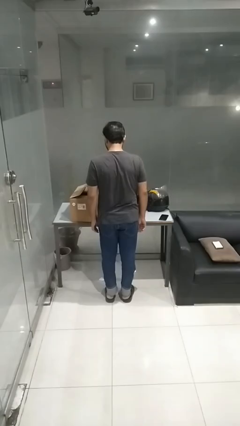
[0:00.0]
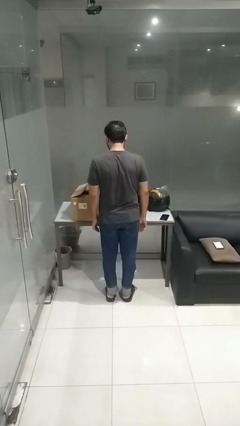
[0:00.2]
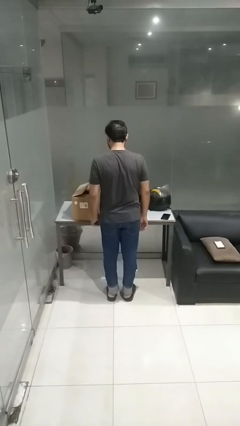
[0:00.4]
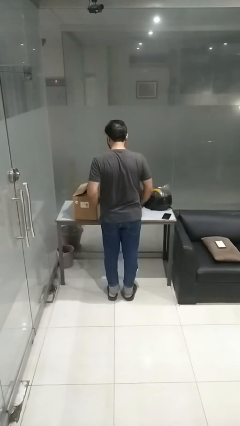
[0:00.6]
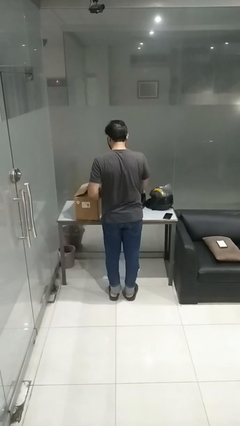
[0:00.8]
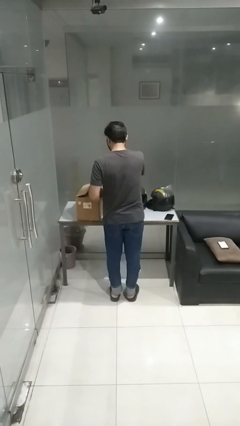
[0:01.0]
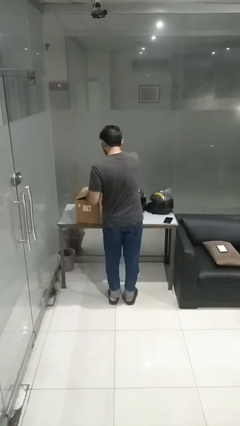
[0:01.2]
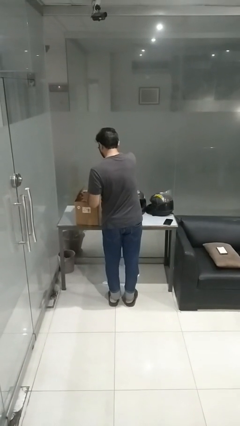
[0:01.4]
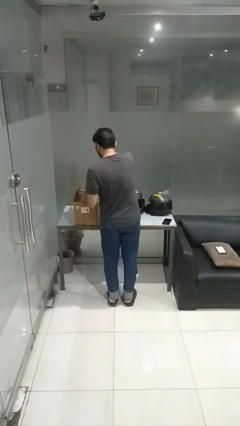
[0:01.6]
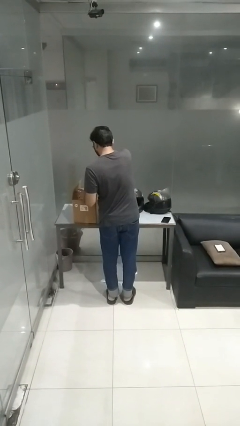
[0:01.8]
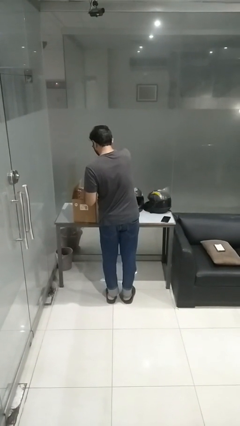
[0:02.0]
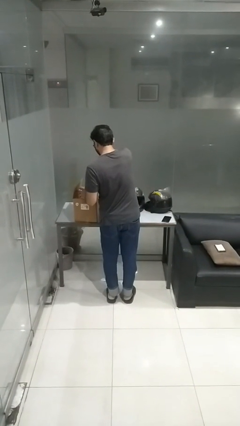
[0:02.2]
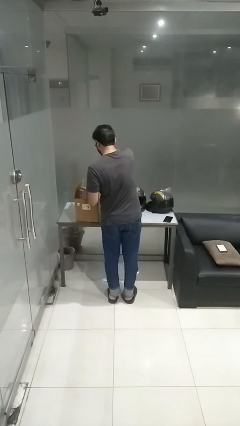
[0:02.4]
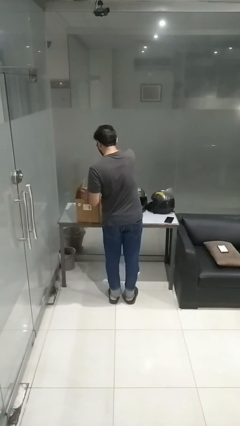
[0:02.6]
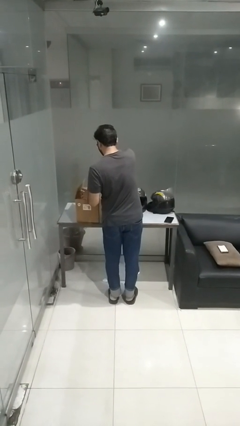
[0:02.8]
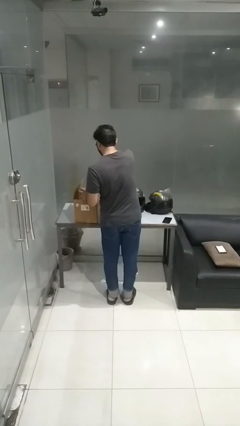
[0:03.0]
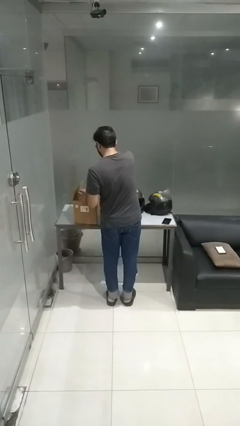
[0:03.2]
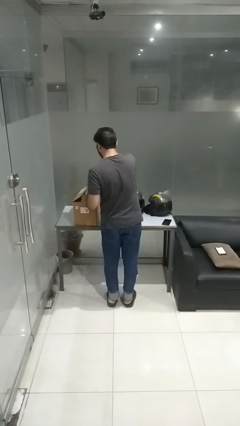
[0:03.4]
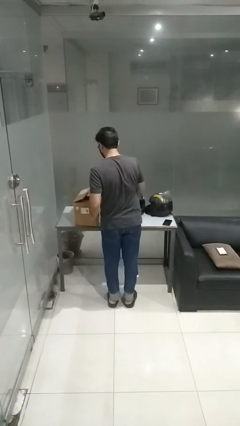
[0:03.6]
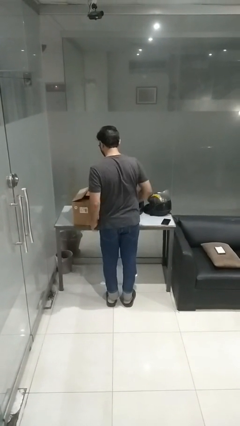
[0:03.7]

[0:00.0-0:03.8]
person searches in box

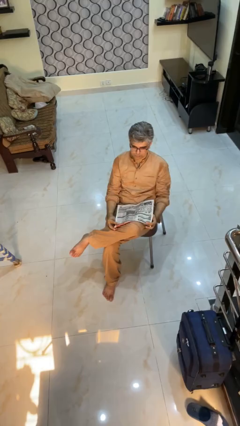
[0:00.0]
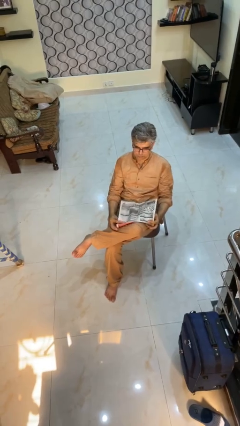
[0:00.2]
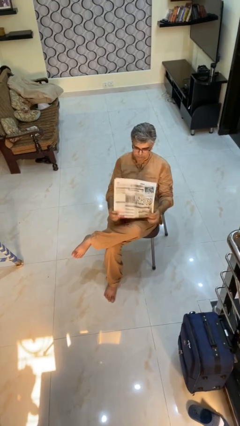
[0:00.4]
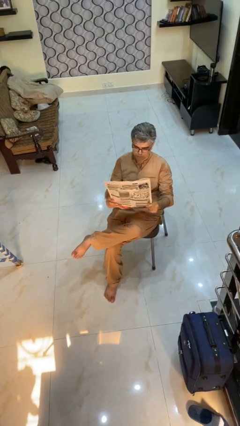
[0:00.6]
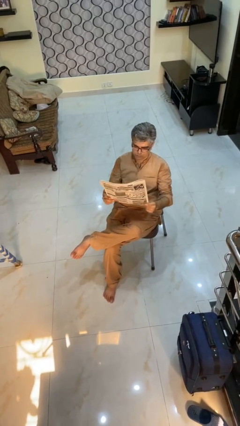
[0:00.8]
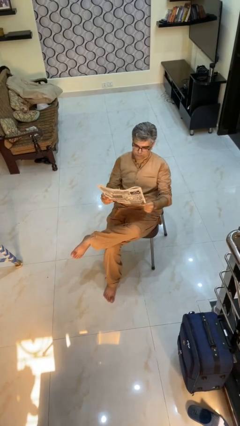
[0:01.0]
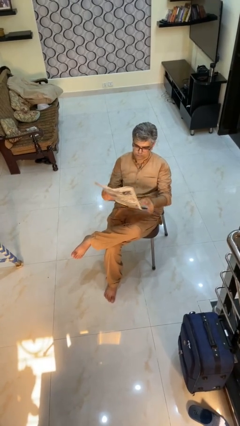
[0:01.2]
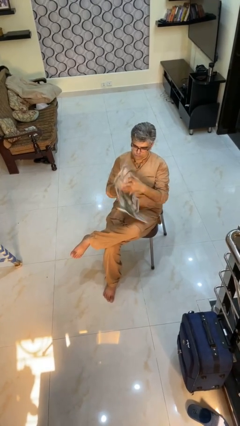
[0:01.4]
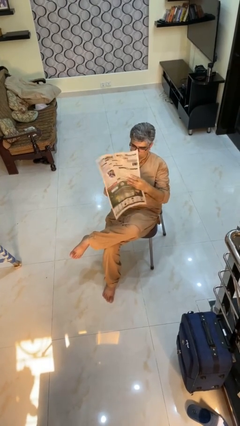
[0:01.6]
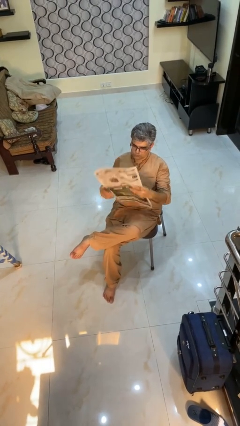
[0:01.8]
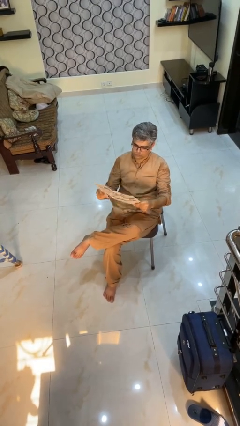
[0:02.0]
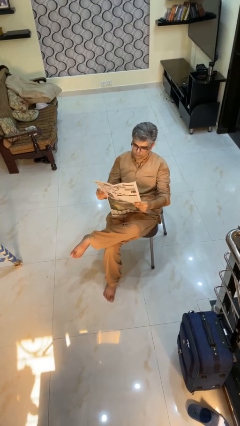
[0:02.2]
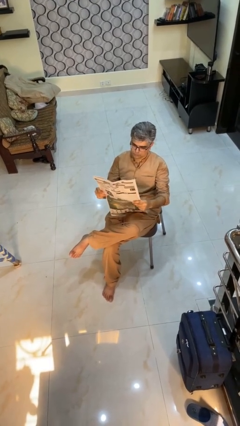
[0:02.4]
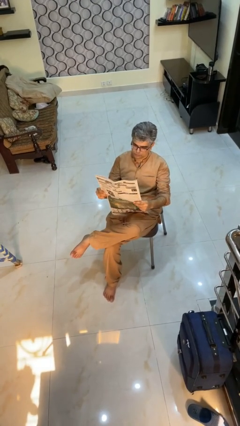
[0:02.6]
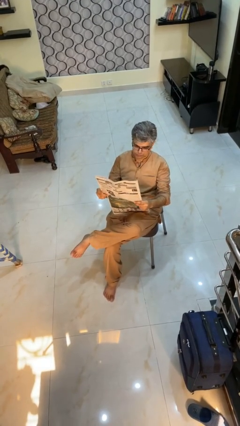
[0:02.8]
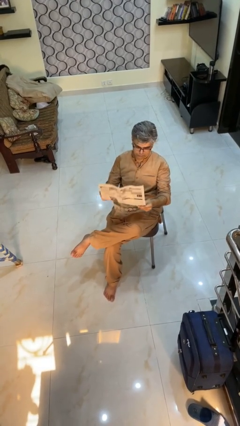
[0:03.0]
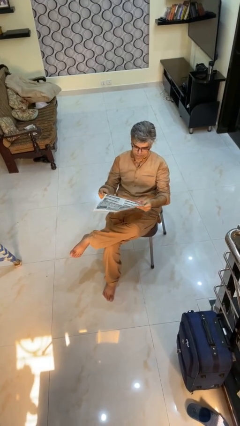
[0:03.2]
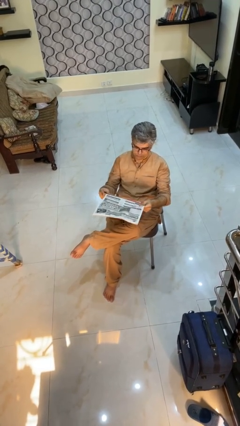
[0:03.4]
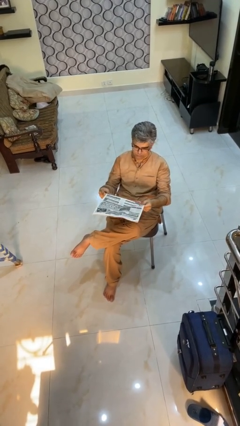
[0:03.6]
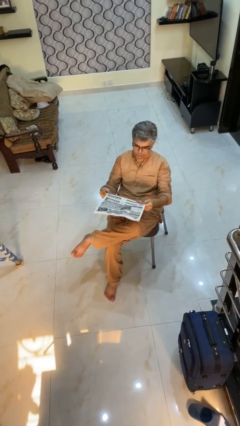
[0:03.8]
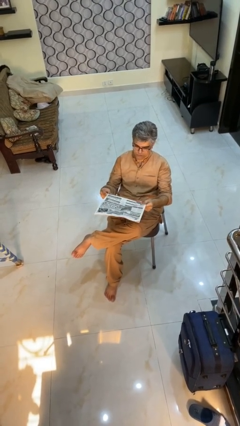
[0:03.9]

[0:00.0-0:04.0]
person reads newspaper

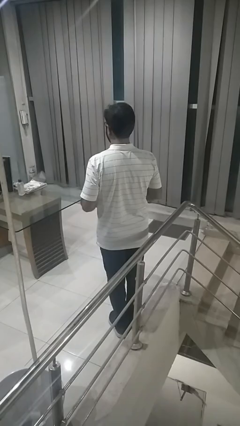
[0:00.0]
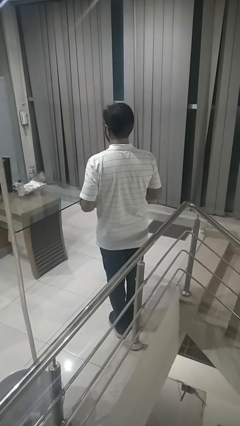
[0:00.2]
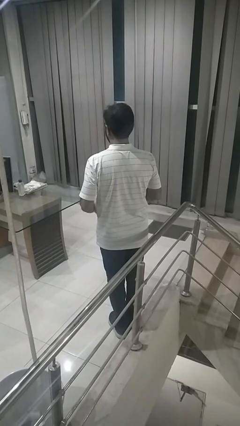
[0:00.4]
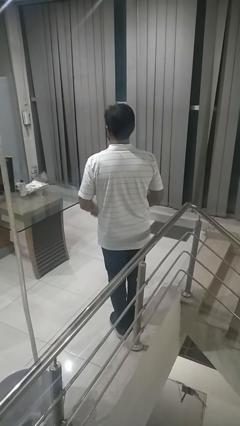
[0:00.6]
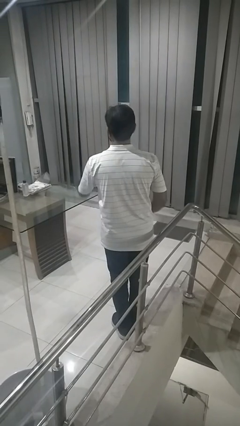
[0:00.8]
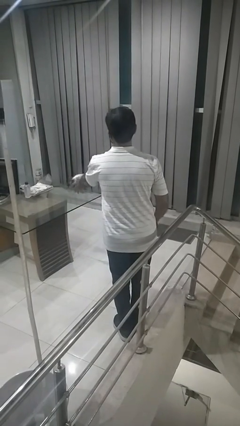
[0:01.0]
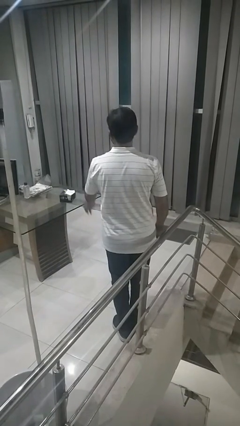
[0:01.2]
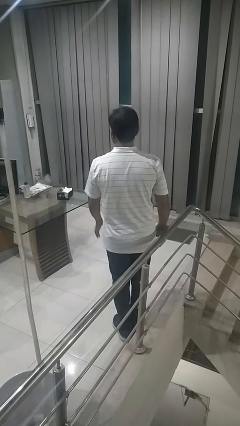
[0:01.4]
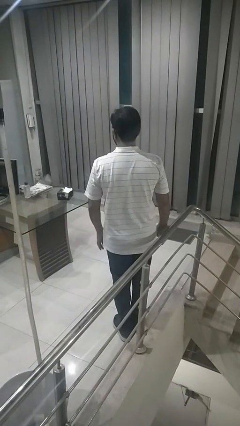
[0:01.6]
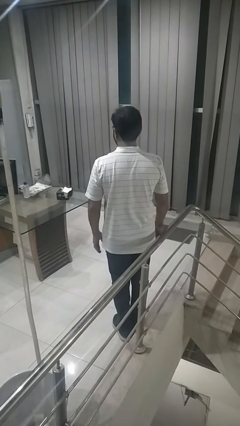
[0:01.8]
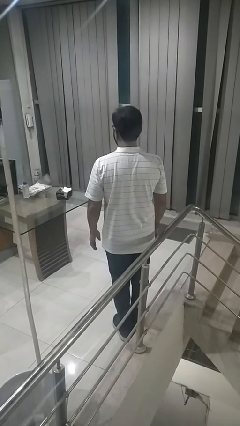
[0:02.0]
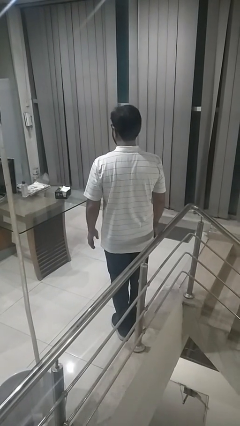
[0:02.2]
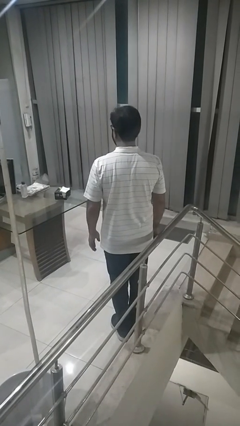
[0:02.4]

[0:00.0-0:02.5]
person throws object on table

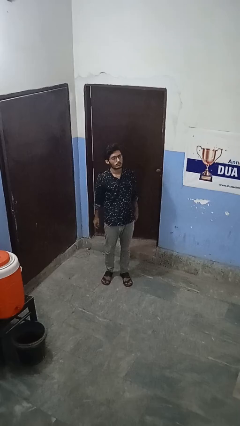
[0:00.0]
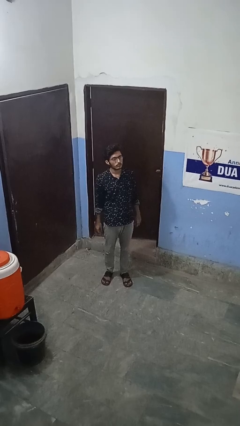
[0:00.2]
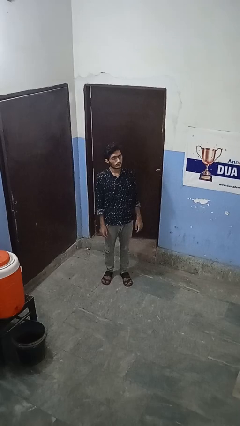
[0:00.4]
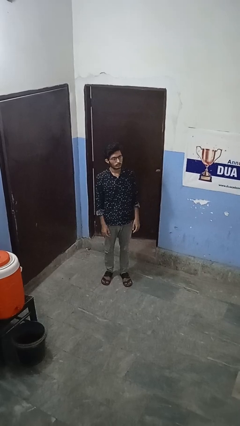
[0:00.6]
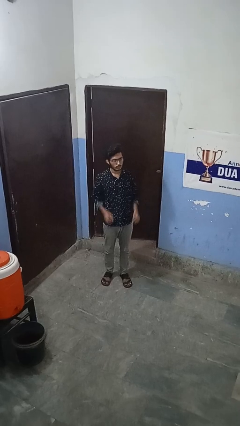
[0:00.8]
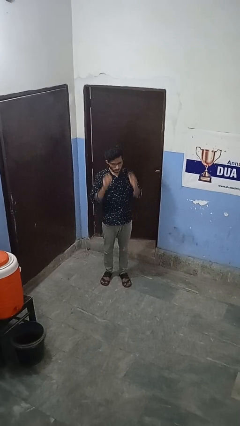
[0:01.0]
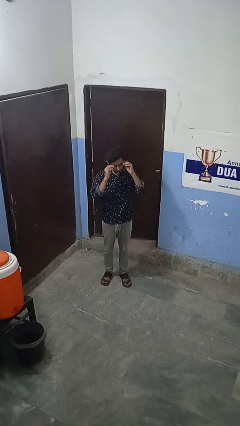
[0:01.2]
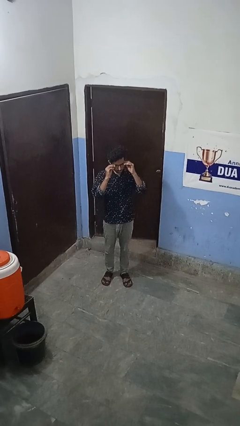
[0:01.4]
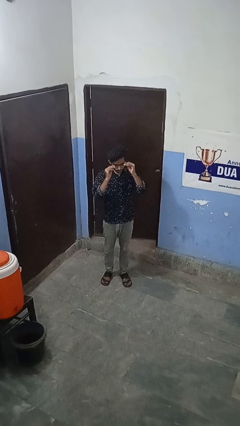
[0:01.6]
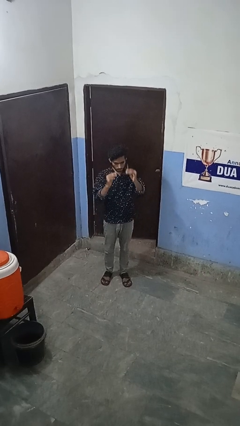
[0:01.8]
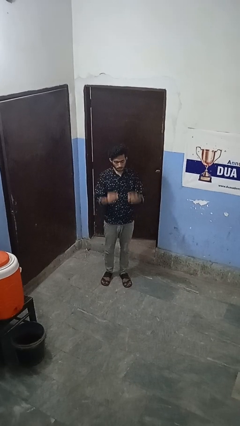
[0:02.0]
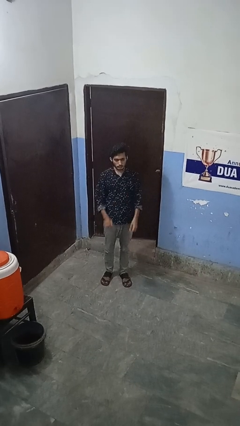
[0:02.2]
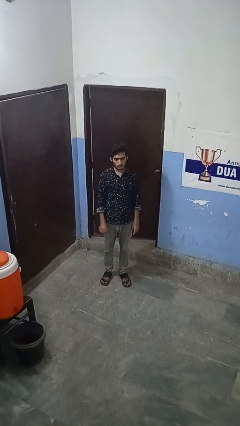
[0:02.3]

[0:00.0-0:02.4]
person takes off glasses

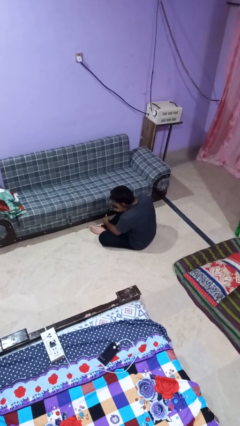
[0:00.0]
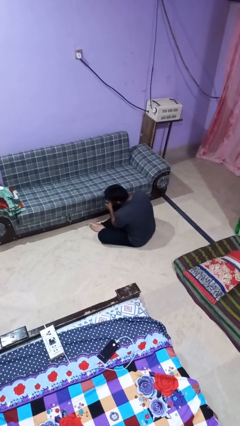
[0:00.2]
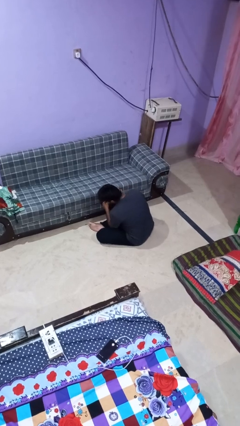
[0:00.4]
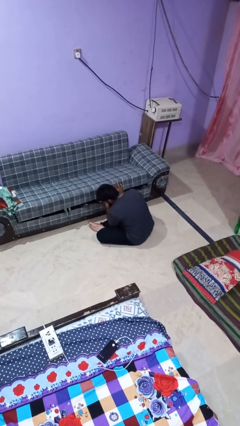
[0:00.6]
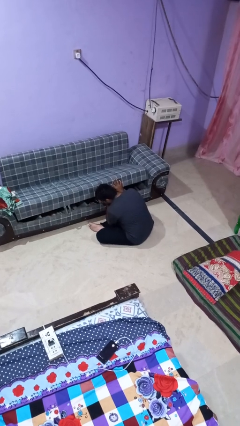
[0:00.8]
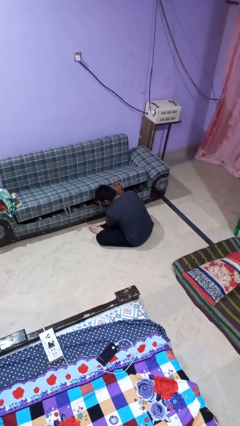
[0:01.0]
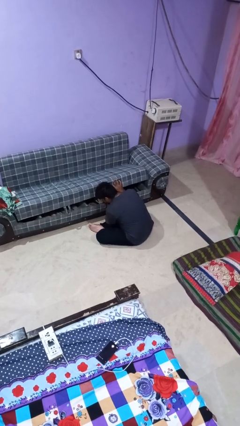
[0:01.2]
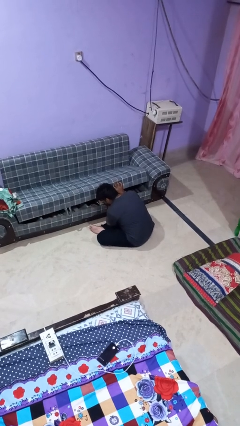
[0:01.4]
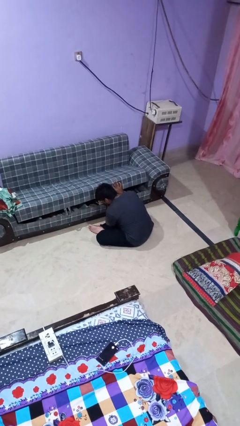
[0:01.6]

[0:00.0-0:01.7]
person searches under couch

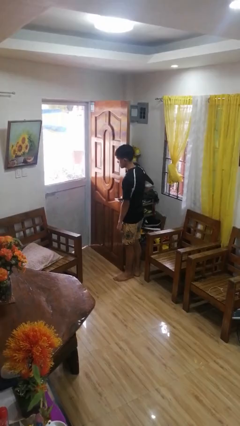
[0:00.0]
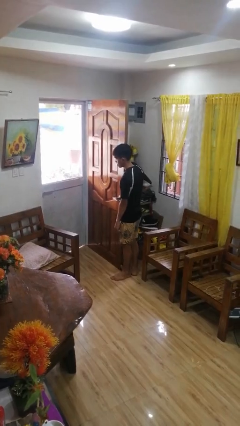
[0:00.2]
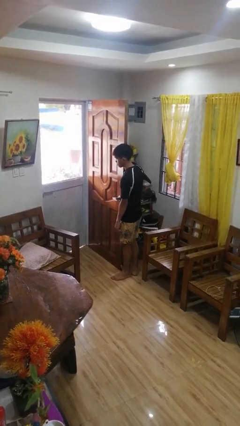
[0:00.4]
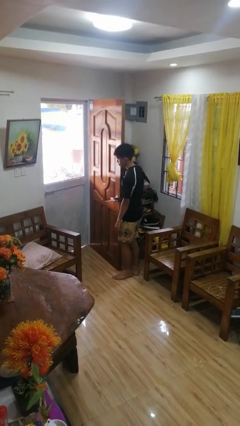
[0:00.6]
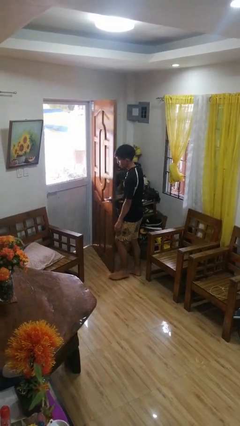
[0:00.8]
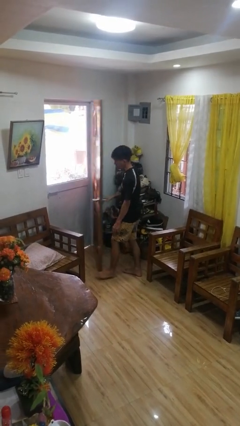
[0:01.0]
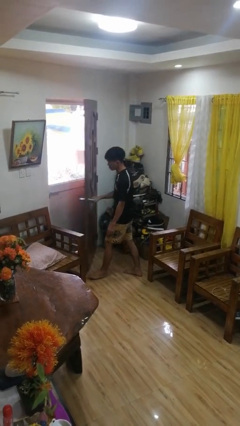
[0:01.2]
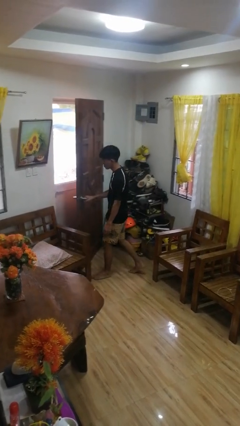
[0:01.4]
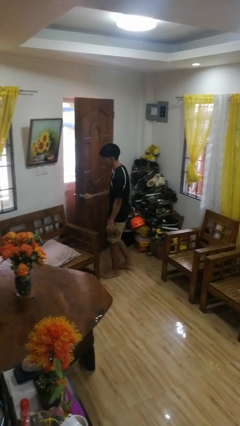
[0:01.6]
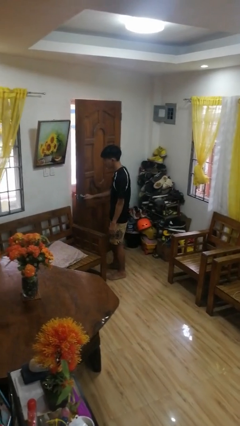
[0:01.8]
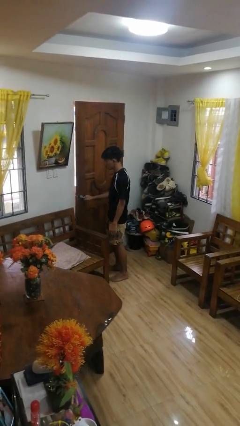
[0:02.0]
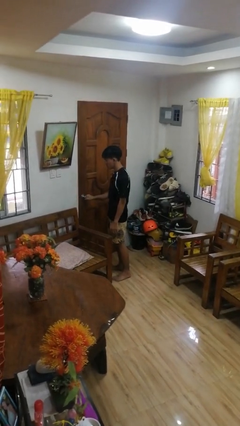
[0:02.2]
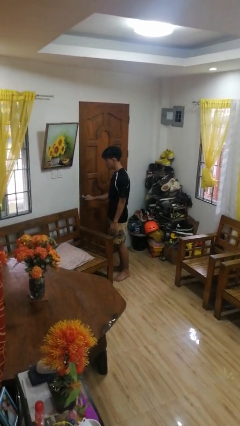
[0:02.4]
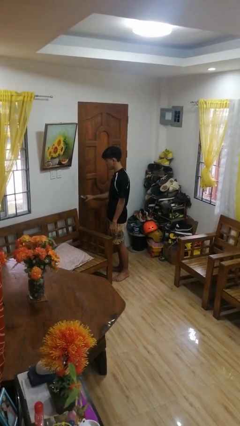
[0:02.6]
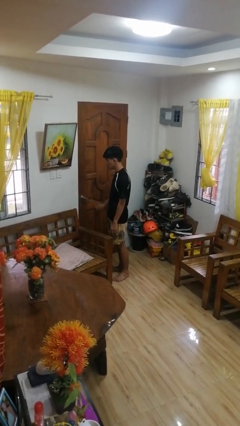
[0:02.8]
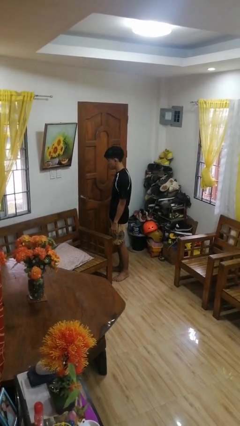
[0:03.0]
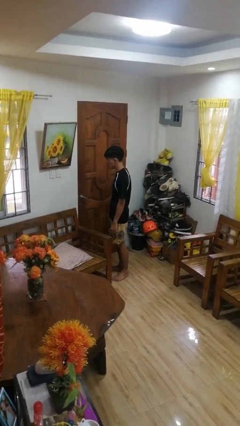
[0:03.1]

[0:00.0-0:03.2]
person closes facility door
